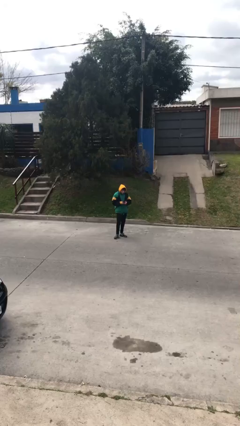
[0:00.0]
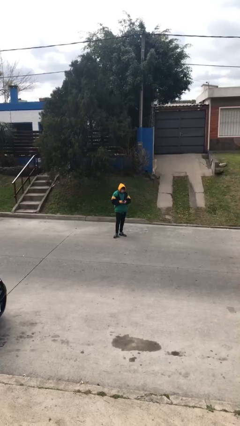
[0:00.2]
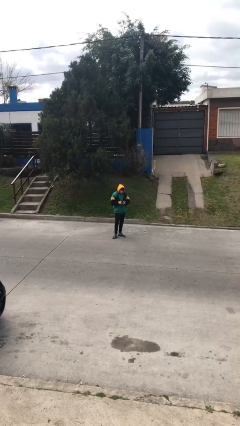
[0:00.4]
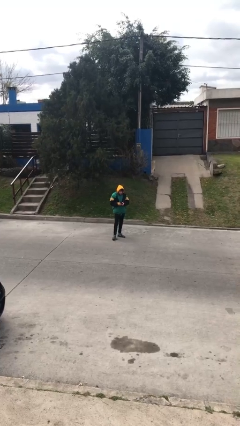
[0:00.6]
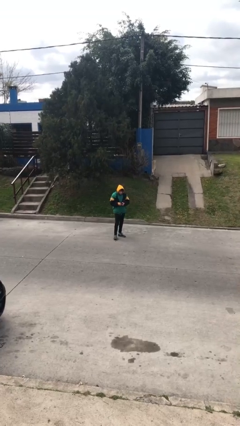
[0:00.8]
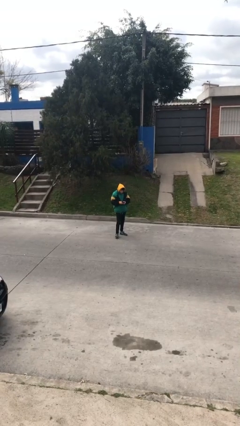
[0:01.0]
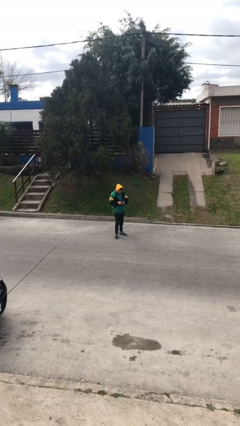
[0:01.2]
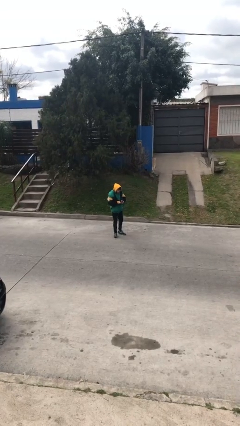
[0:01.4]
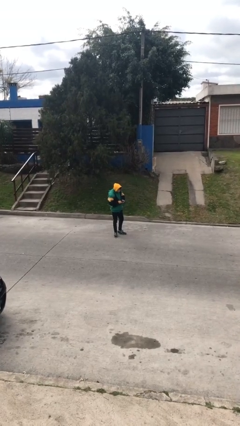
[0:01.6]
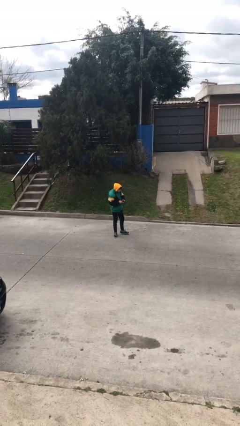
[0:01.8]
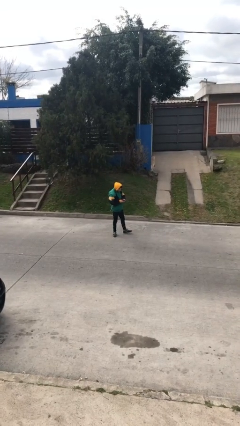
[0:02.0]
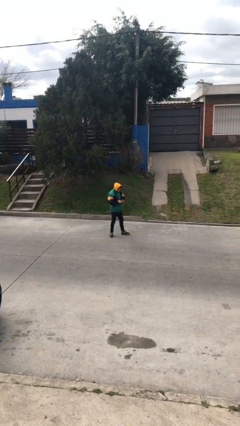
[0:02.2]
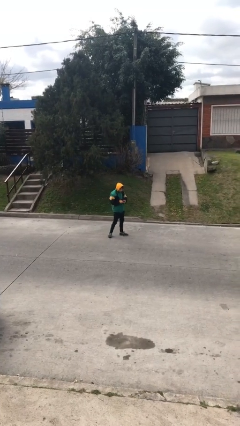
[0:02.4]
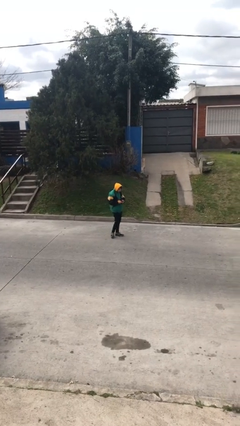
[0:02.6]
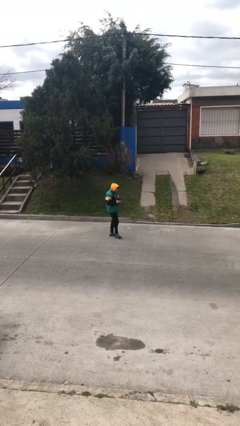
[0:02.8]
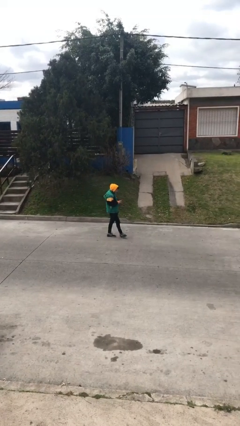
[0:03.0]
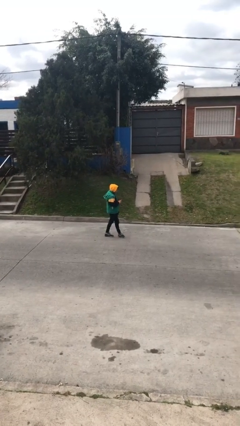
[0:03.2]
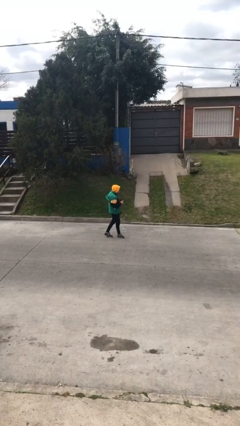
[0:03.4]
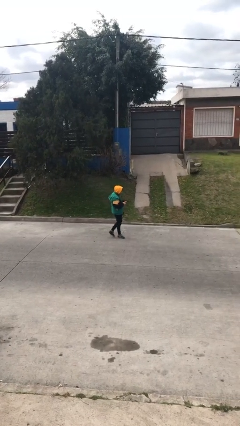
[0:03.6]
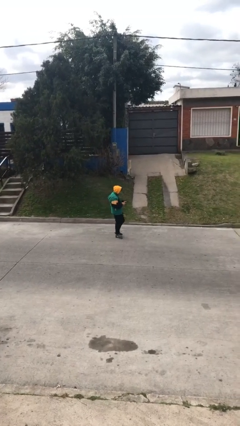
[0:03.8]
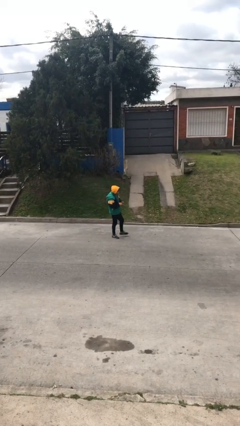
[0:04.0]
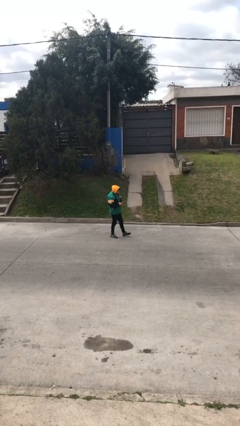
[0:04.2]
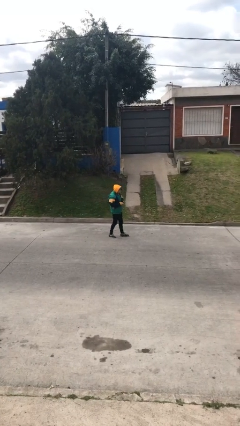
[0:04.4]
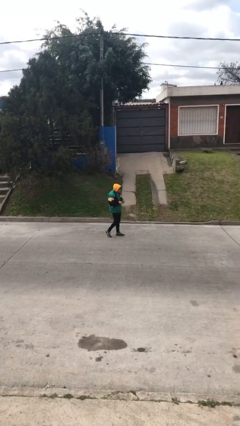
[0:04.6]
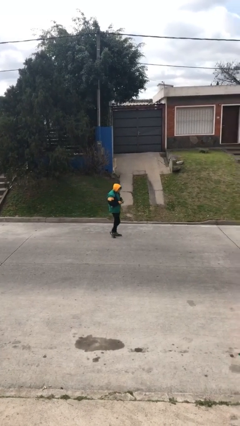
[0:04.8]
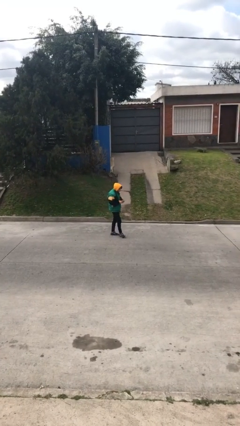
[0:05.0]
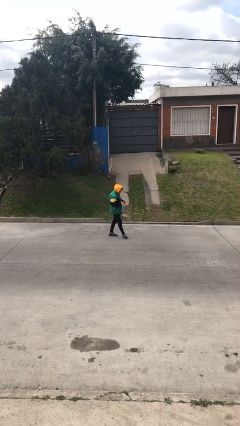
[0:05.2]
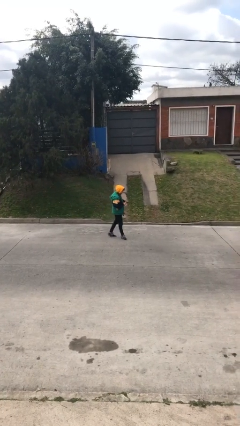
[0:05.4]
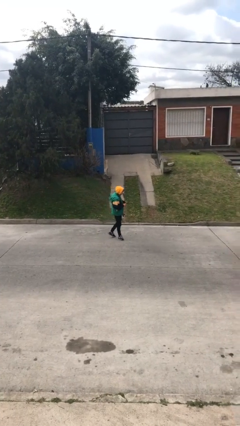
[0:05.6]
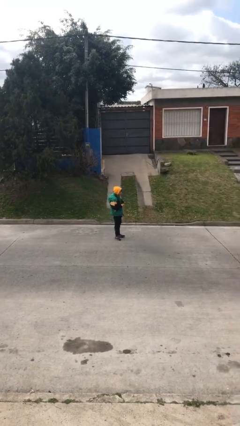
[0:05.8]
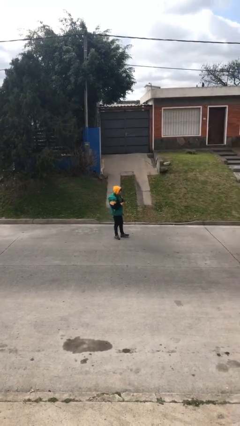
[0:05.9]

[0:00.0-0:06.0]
person texts on phone

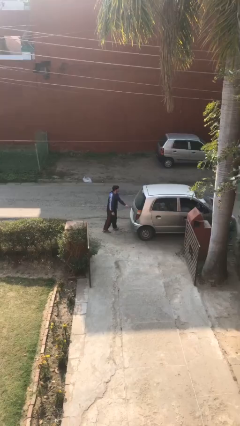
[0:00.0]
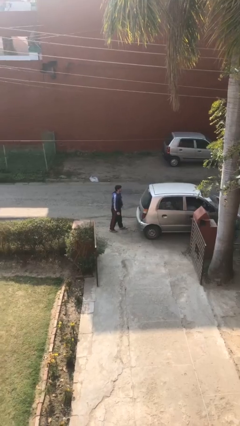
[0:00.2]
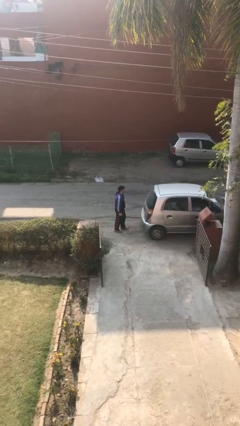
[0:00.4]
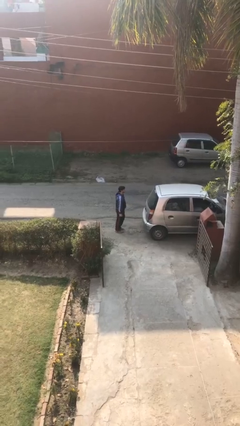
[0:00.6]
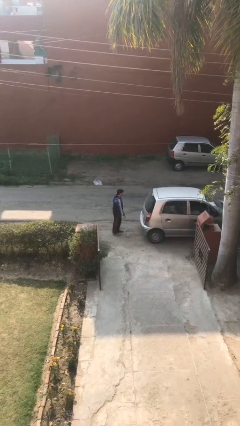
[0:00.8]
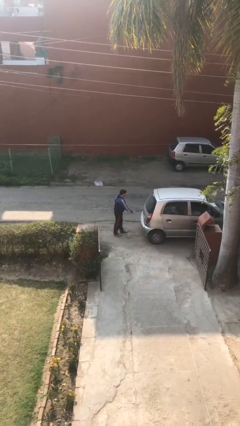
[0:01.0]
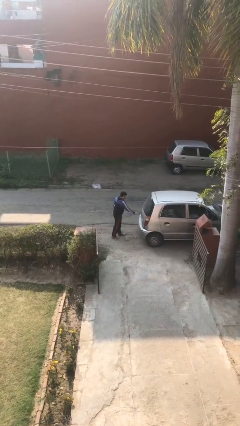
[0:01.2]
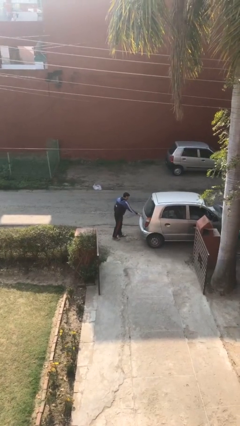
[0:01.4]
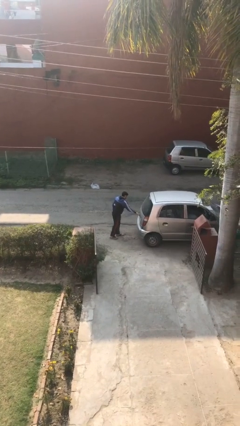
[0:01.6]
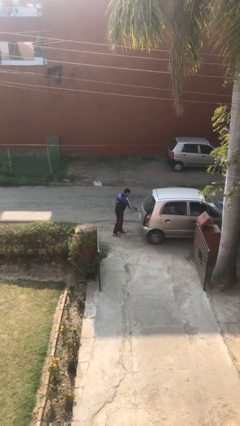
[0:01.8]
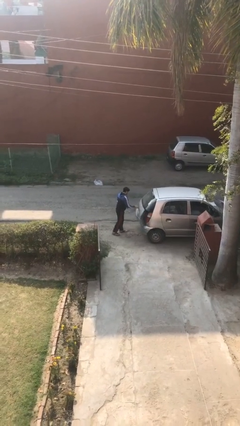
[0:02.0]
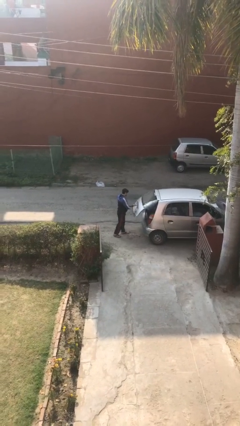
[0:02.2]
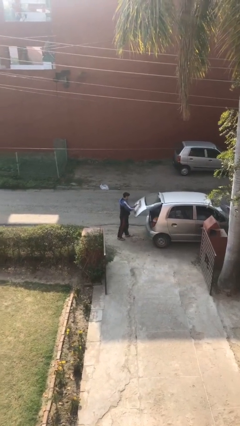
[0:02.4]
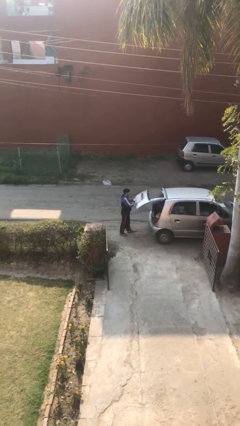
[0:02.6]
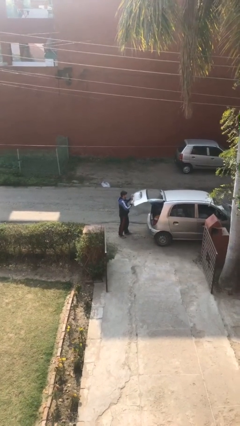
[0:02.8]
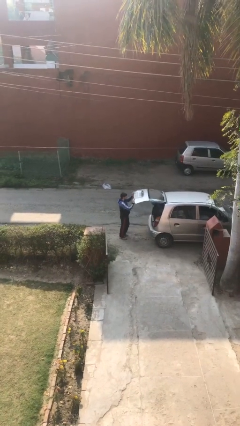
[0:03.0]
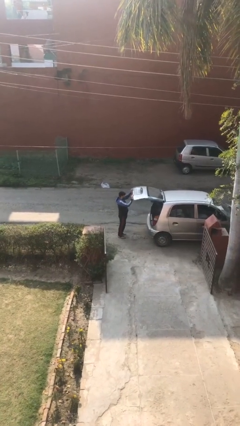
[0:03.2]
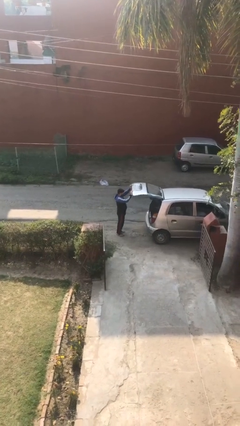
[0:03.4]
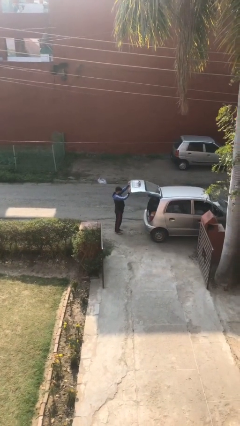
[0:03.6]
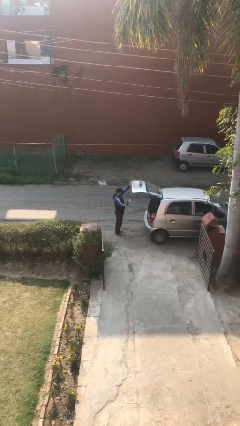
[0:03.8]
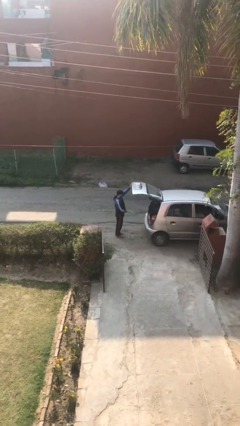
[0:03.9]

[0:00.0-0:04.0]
person opens car trunk

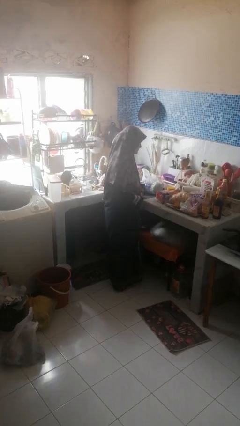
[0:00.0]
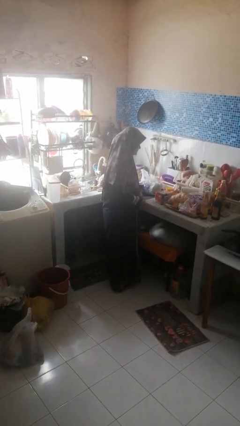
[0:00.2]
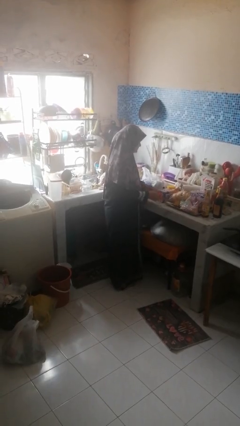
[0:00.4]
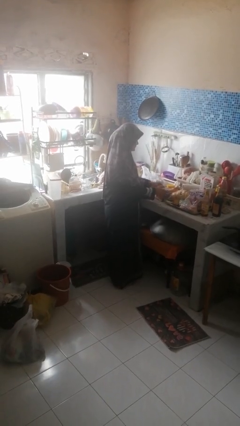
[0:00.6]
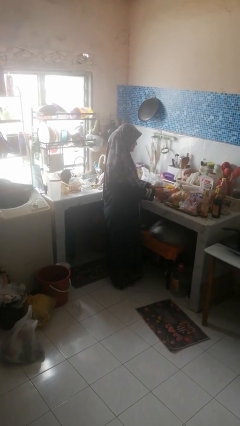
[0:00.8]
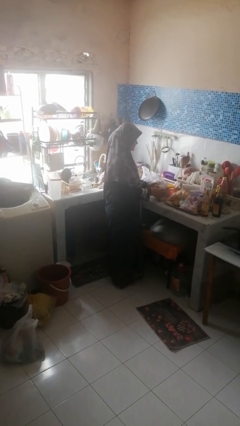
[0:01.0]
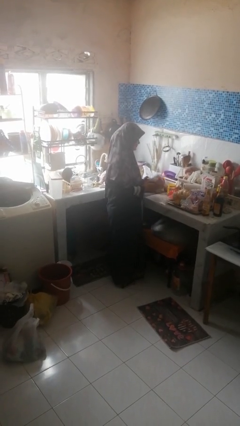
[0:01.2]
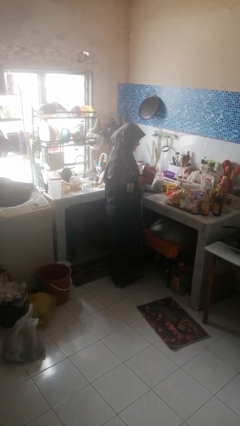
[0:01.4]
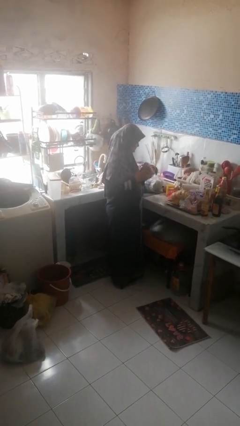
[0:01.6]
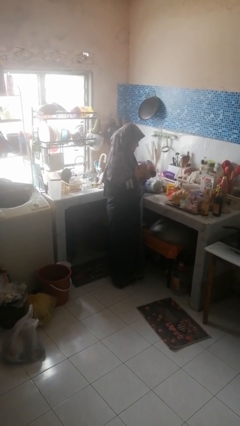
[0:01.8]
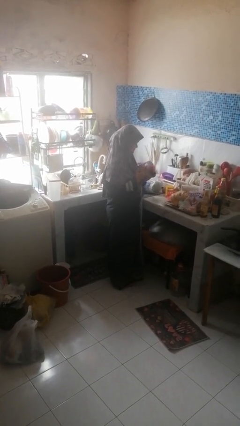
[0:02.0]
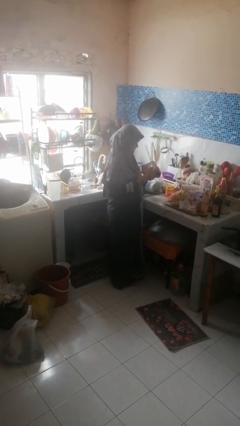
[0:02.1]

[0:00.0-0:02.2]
person picks up object from countertop

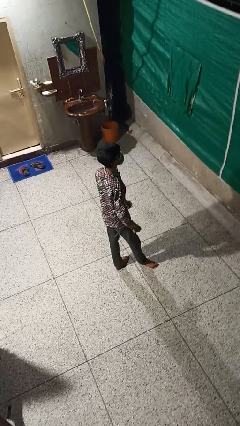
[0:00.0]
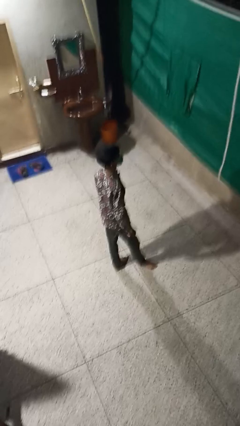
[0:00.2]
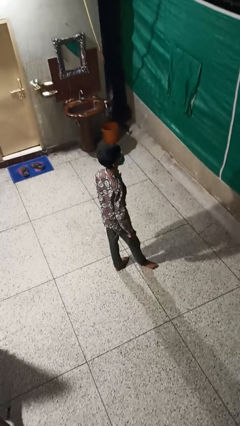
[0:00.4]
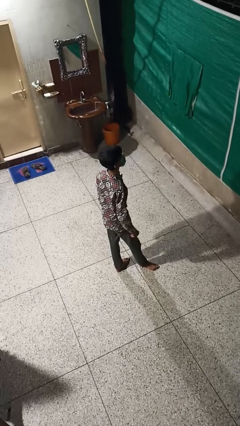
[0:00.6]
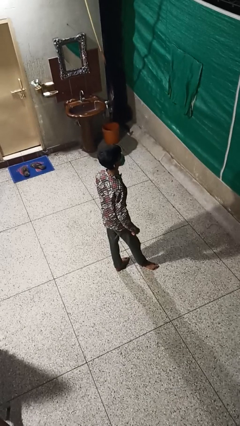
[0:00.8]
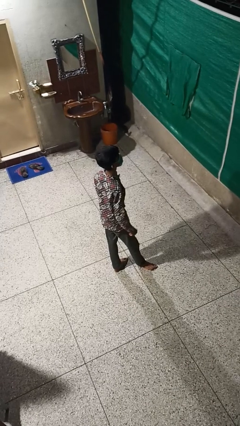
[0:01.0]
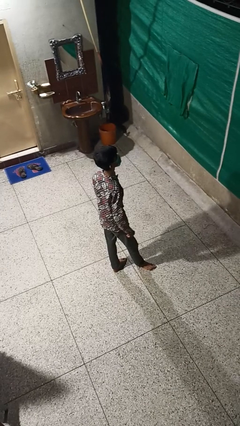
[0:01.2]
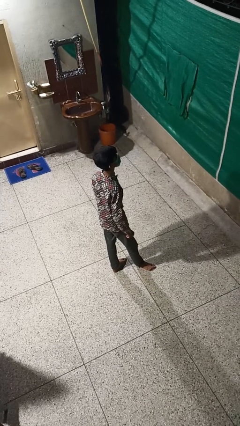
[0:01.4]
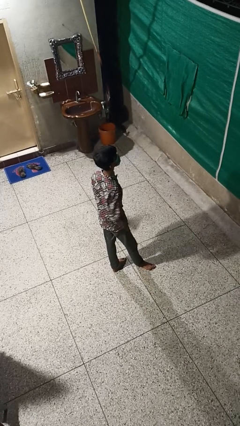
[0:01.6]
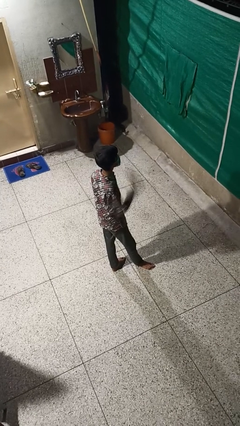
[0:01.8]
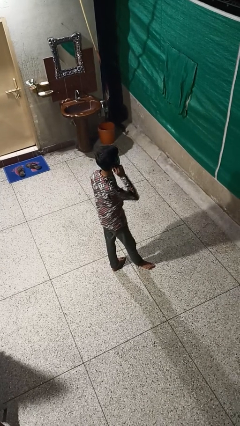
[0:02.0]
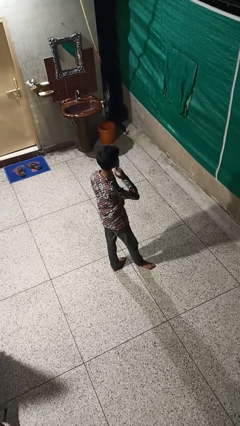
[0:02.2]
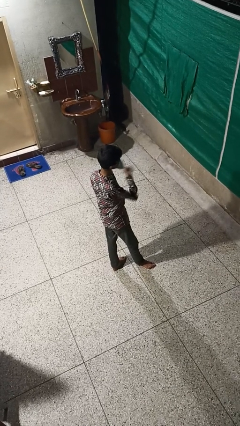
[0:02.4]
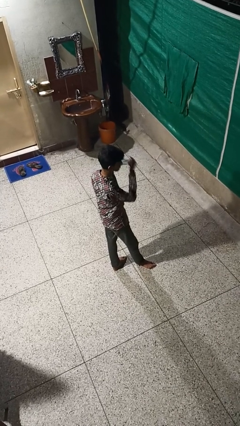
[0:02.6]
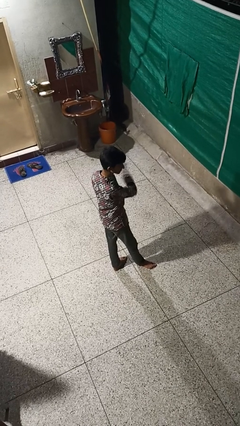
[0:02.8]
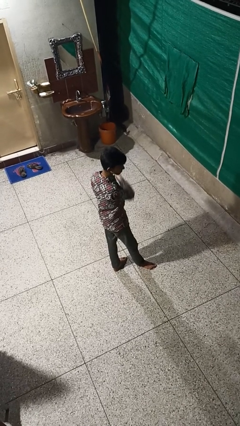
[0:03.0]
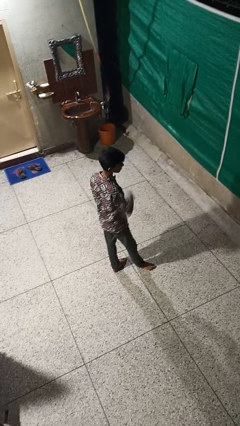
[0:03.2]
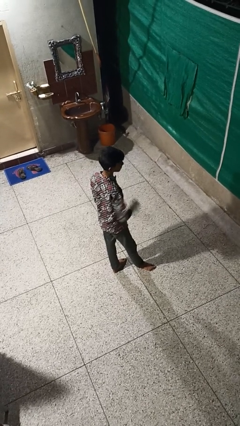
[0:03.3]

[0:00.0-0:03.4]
person takes off facemask

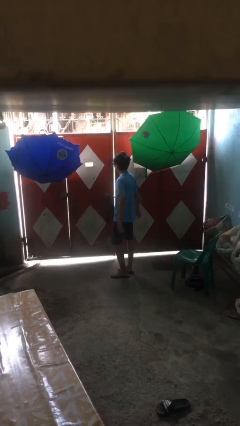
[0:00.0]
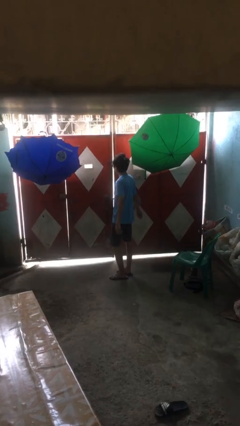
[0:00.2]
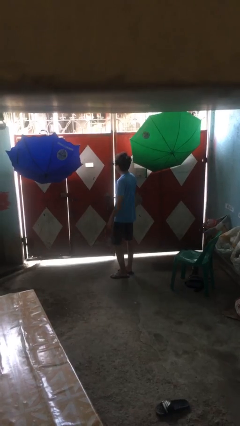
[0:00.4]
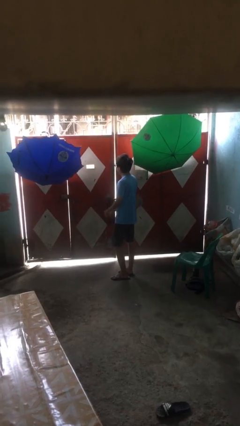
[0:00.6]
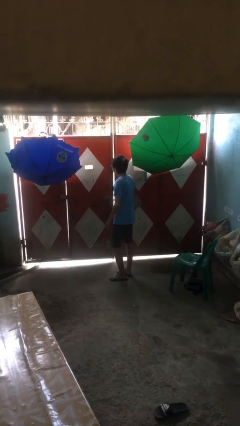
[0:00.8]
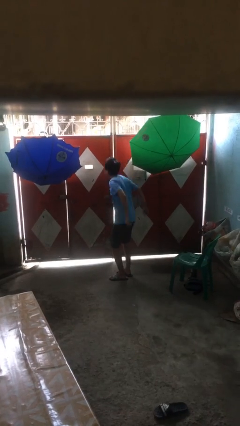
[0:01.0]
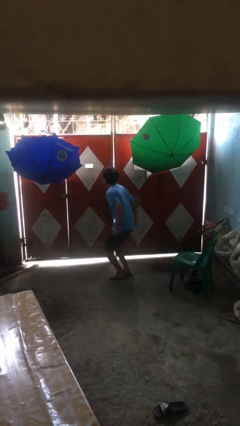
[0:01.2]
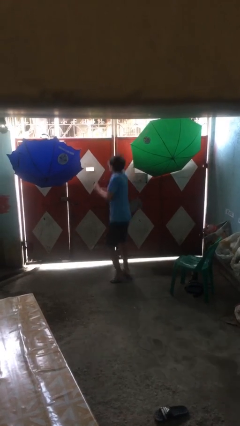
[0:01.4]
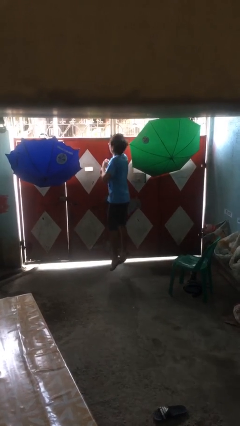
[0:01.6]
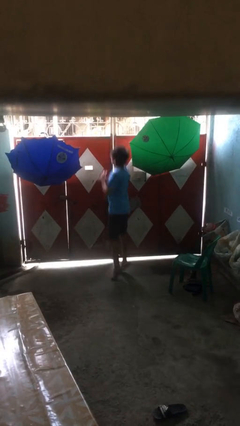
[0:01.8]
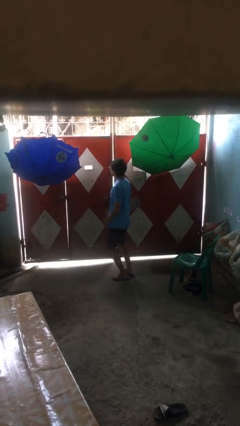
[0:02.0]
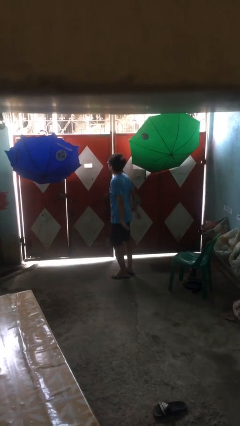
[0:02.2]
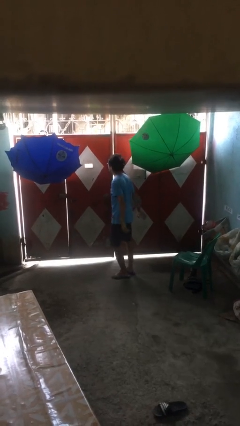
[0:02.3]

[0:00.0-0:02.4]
person jumps
